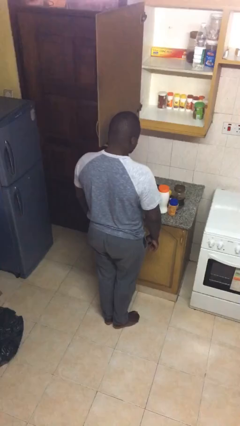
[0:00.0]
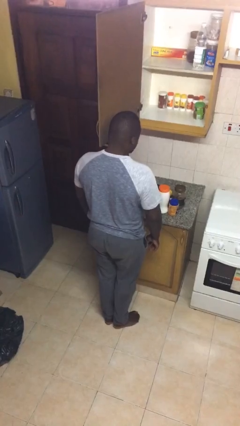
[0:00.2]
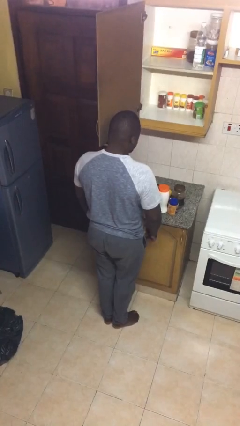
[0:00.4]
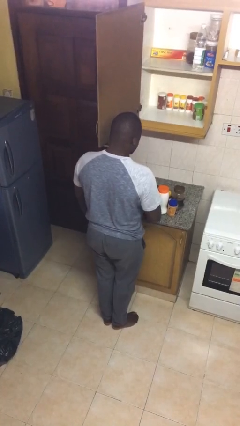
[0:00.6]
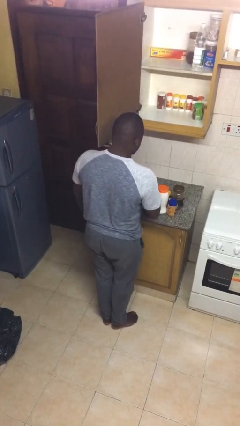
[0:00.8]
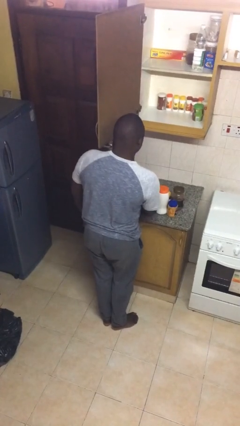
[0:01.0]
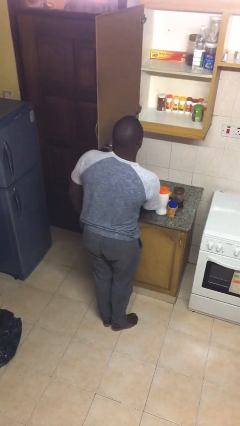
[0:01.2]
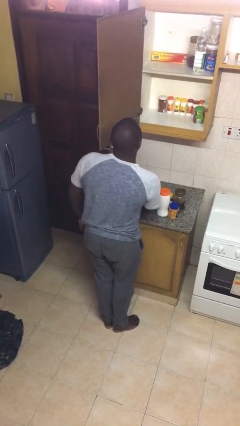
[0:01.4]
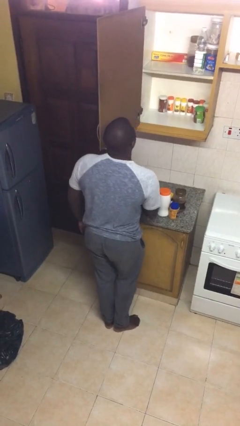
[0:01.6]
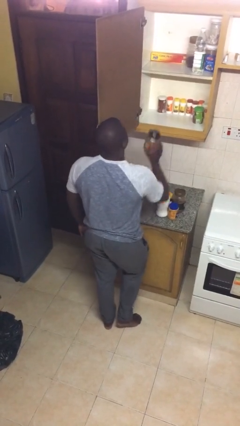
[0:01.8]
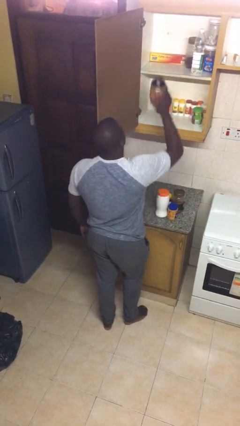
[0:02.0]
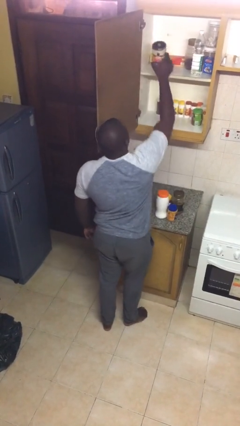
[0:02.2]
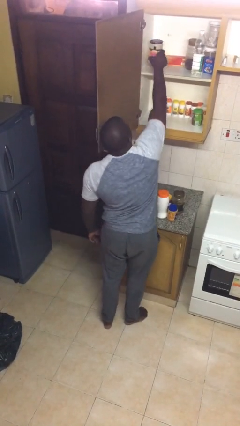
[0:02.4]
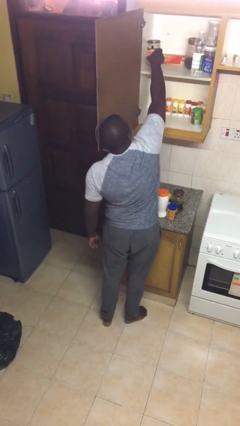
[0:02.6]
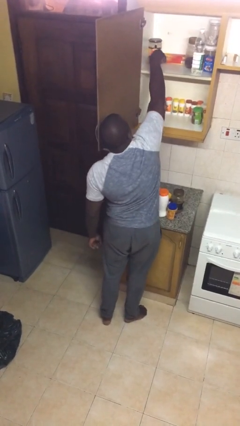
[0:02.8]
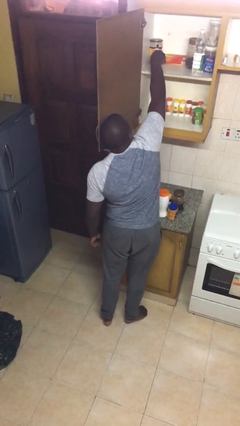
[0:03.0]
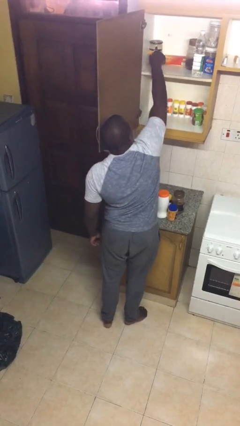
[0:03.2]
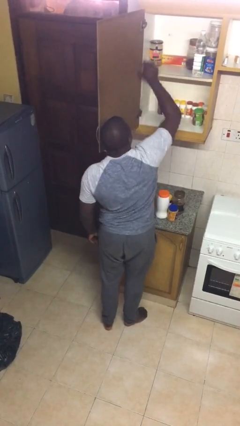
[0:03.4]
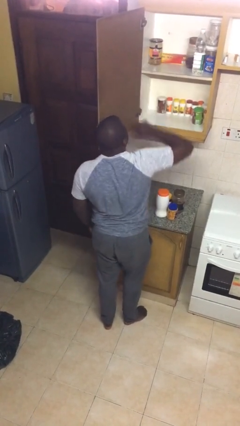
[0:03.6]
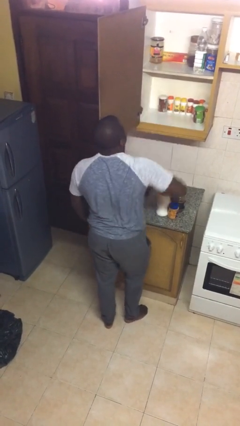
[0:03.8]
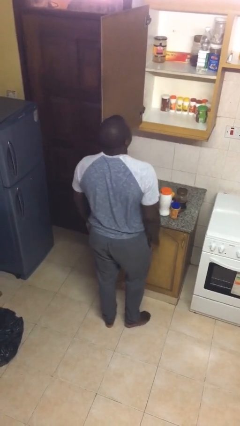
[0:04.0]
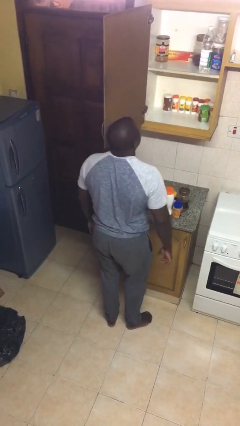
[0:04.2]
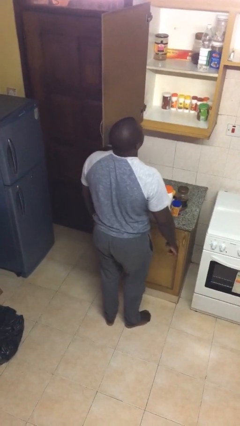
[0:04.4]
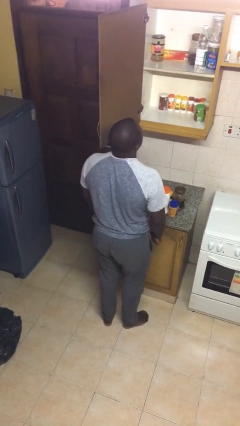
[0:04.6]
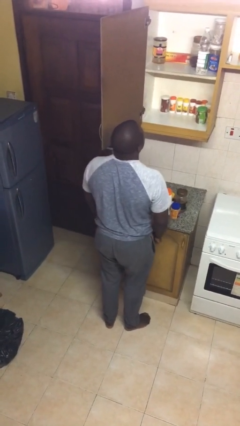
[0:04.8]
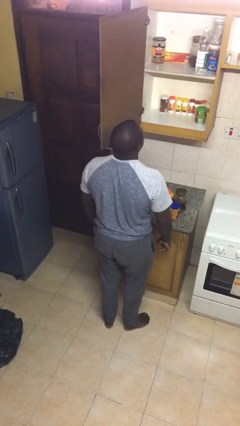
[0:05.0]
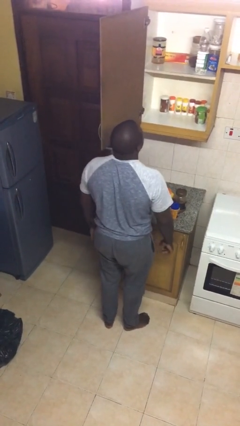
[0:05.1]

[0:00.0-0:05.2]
person puts object in cabinet

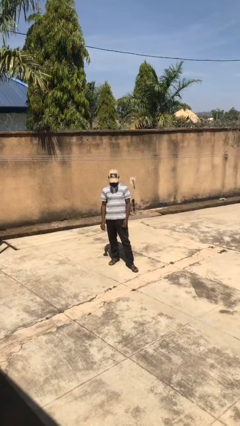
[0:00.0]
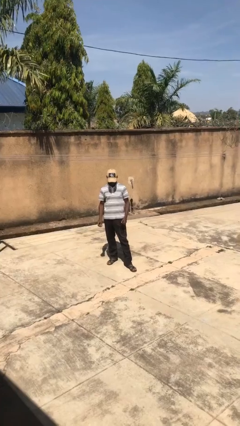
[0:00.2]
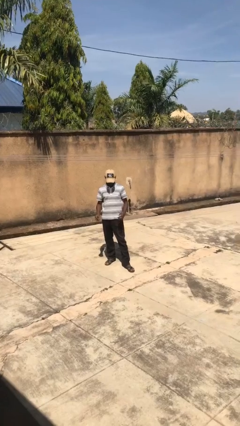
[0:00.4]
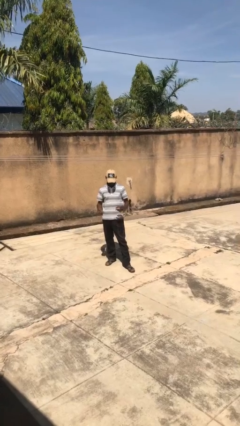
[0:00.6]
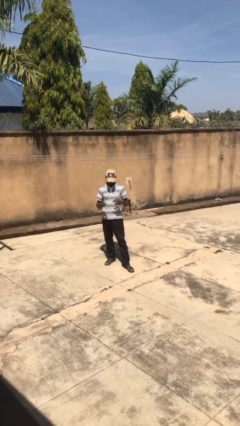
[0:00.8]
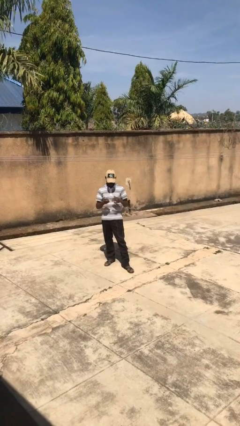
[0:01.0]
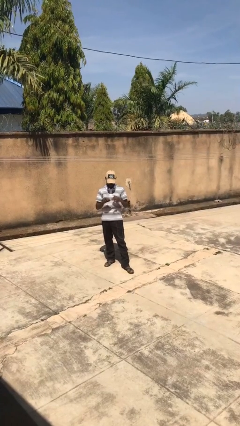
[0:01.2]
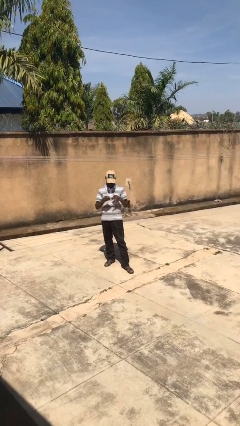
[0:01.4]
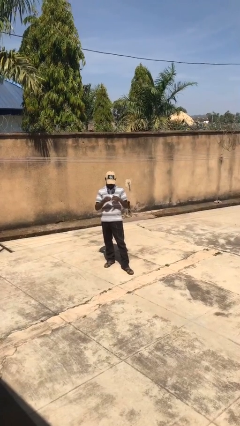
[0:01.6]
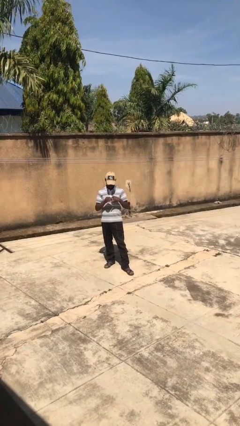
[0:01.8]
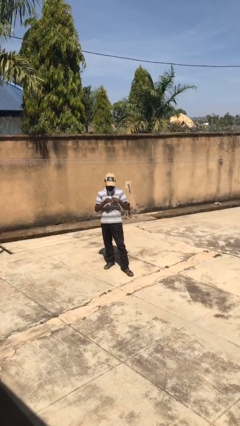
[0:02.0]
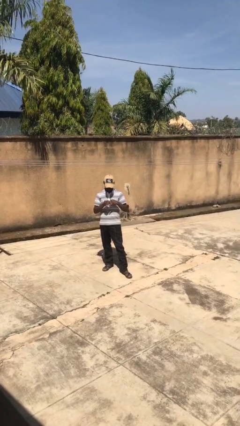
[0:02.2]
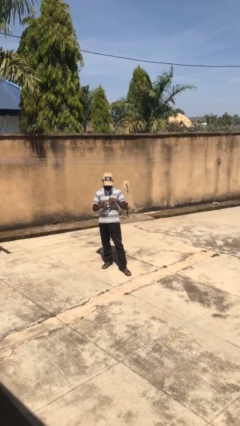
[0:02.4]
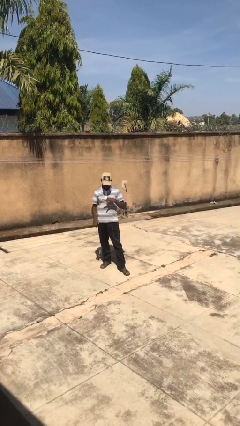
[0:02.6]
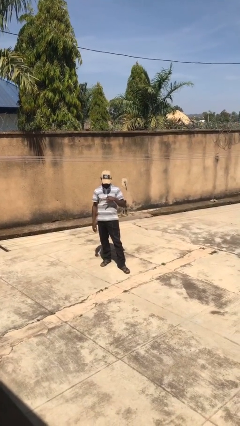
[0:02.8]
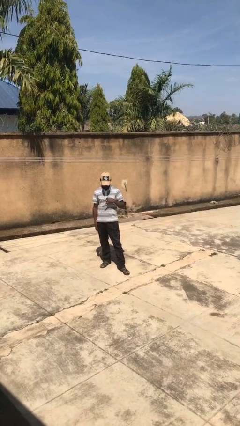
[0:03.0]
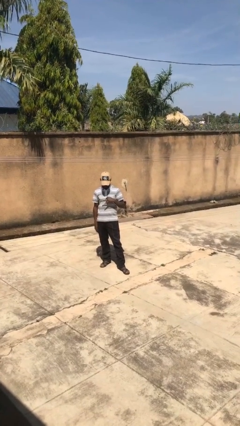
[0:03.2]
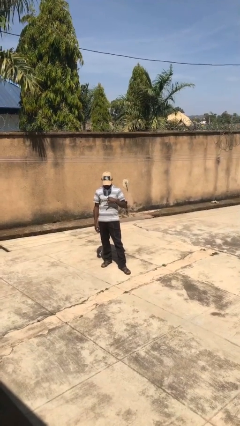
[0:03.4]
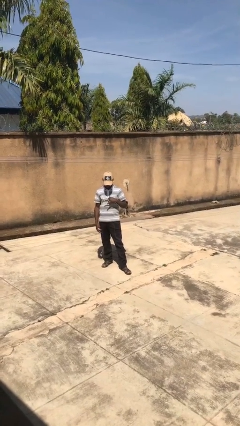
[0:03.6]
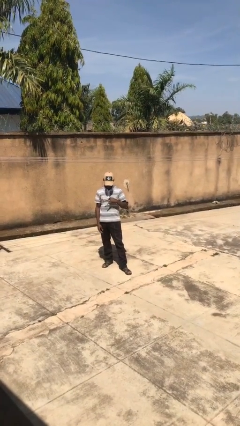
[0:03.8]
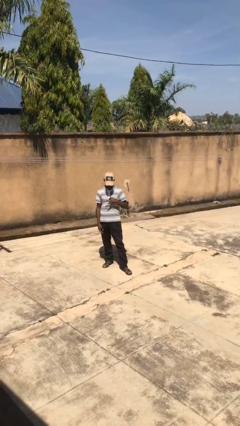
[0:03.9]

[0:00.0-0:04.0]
person puts on ring

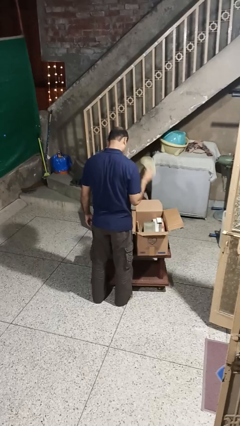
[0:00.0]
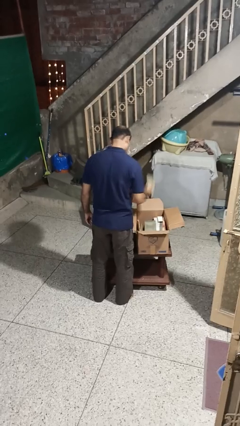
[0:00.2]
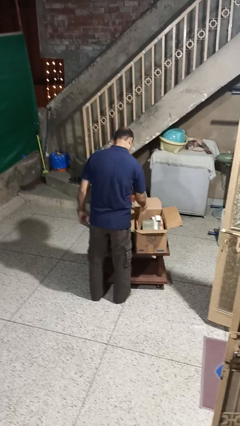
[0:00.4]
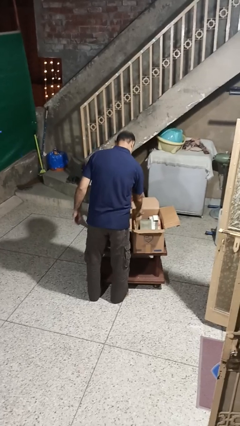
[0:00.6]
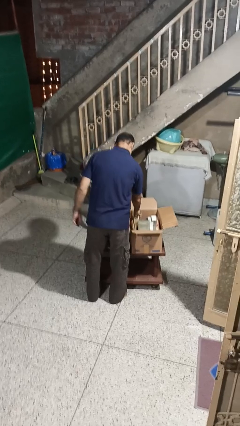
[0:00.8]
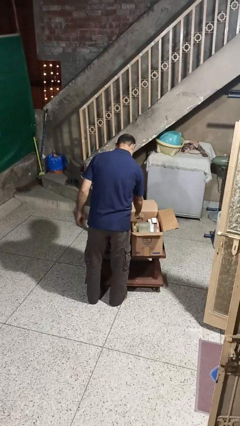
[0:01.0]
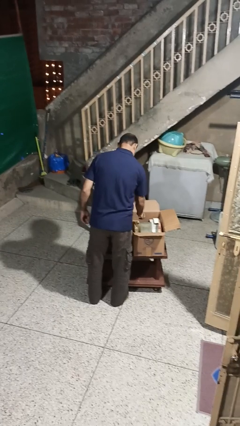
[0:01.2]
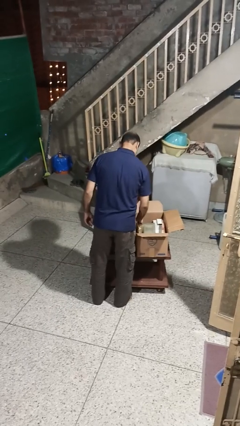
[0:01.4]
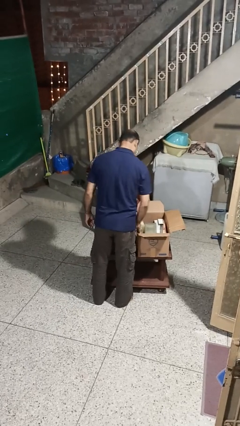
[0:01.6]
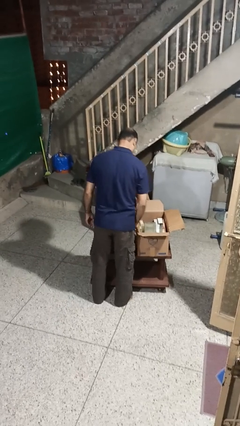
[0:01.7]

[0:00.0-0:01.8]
person puts object into box

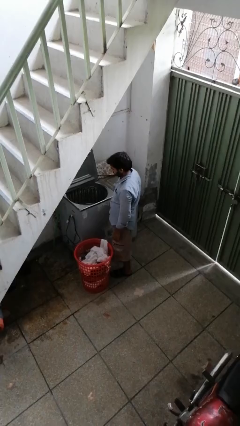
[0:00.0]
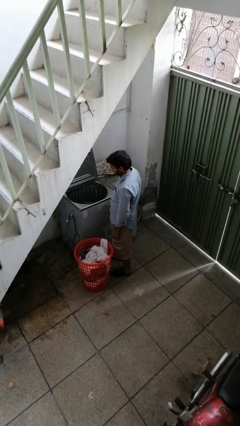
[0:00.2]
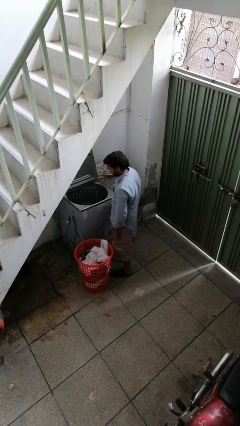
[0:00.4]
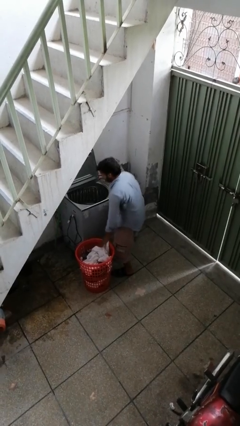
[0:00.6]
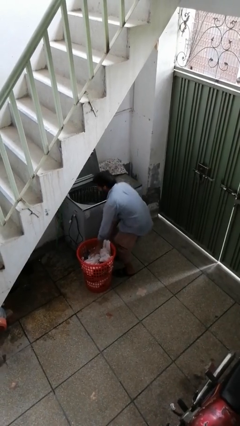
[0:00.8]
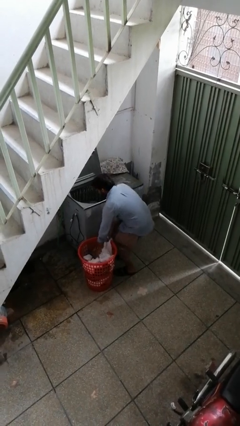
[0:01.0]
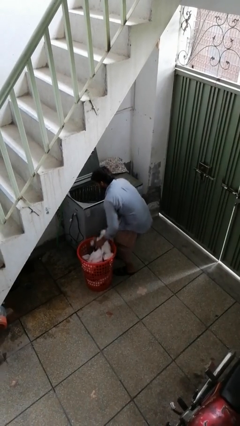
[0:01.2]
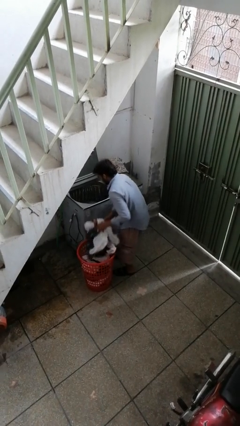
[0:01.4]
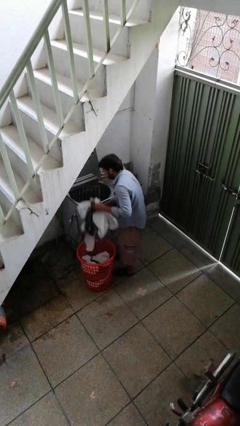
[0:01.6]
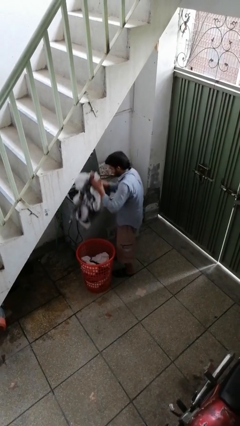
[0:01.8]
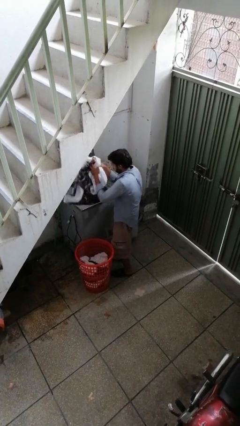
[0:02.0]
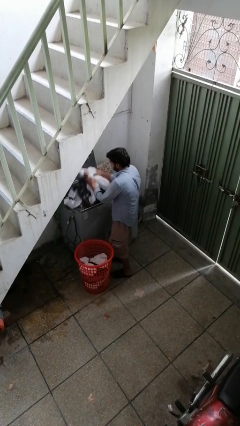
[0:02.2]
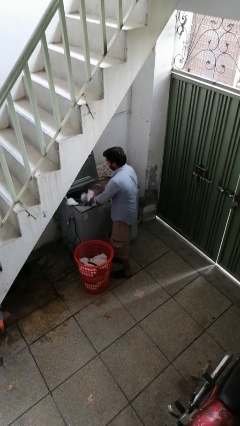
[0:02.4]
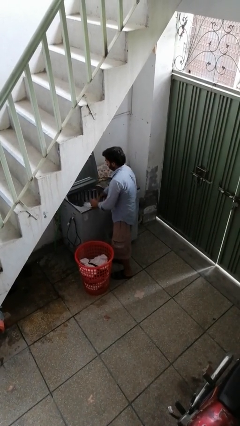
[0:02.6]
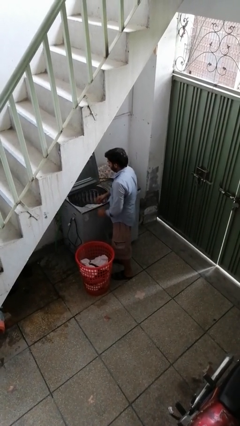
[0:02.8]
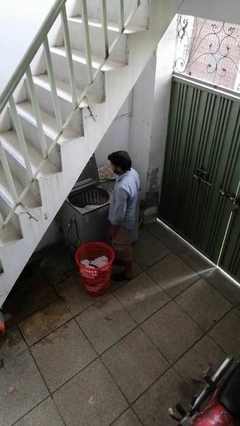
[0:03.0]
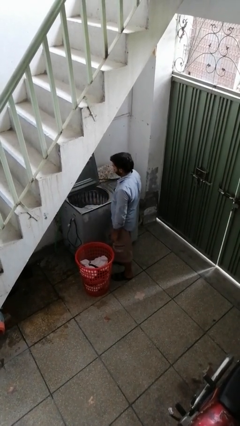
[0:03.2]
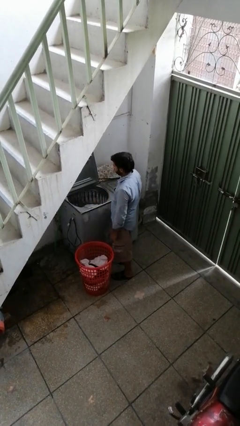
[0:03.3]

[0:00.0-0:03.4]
person loads clotheswasher

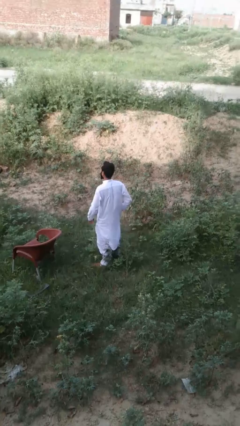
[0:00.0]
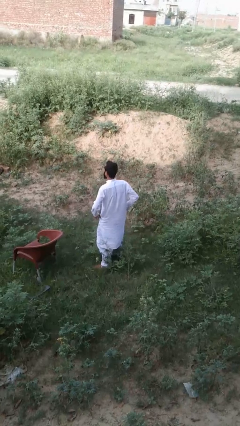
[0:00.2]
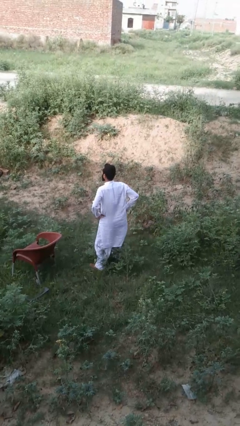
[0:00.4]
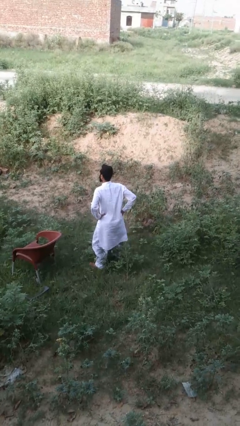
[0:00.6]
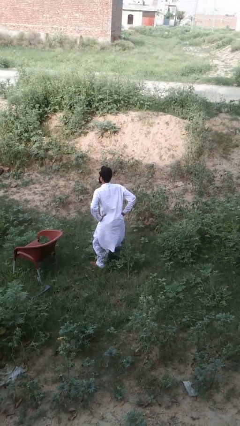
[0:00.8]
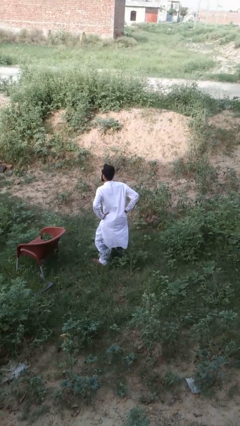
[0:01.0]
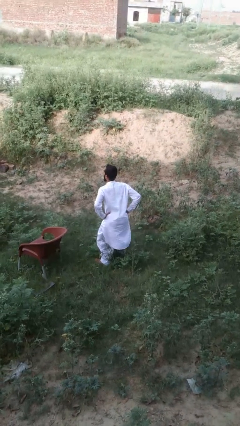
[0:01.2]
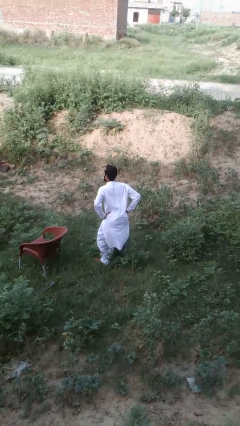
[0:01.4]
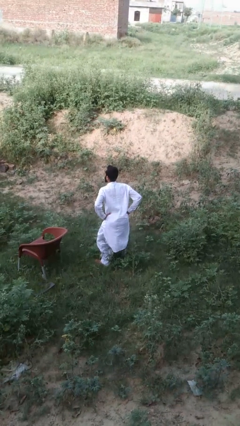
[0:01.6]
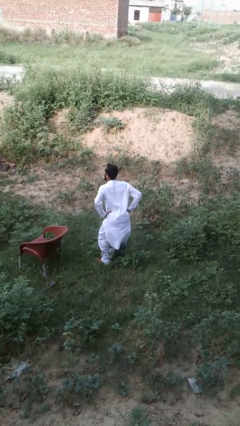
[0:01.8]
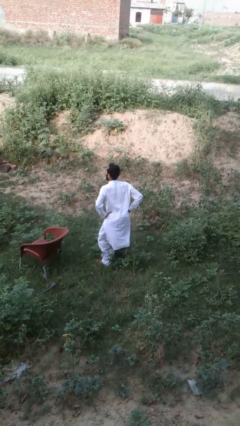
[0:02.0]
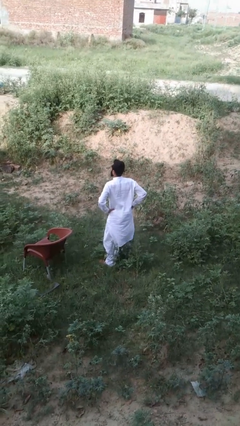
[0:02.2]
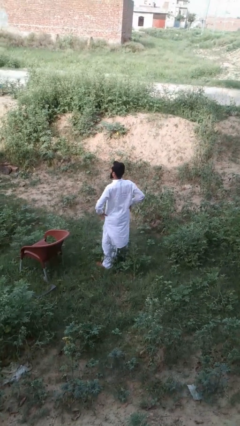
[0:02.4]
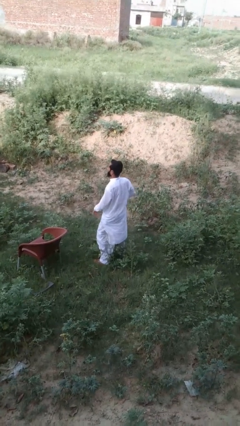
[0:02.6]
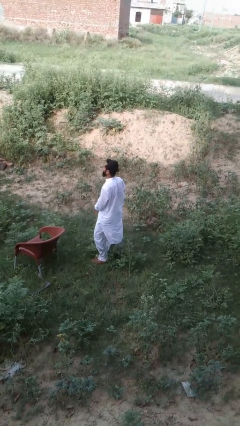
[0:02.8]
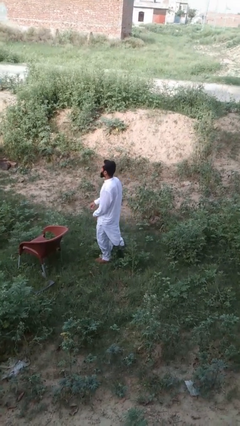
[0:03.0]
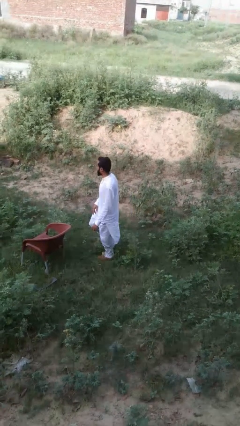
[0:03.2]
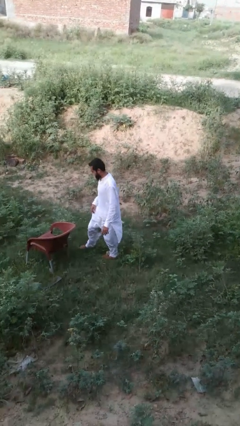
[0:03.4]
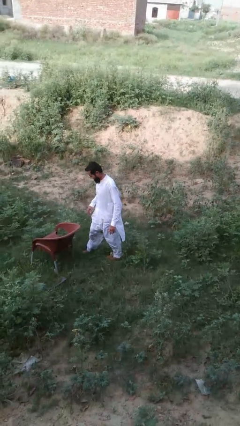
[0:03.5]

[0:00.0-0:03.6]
person wiggles hips
